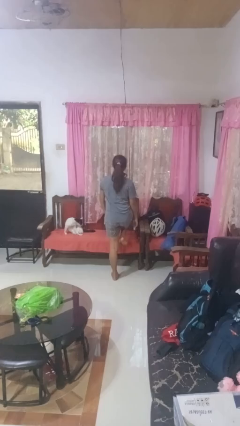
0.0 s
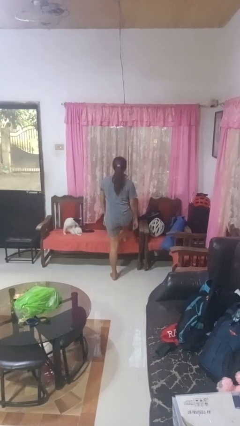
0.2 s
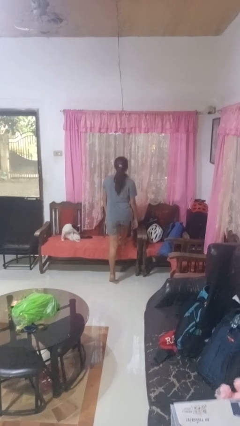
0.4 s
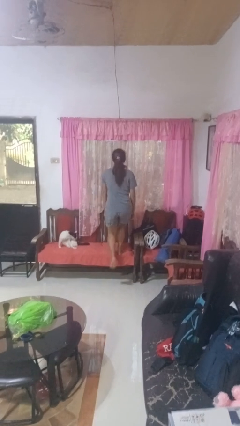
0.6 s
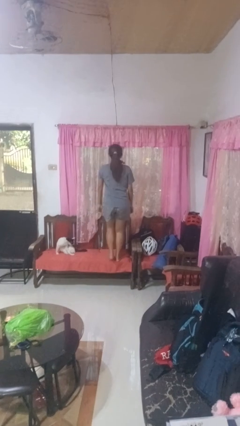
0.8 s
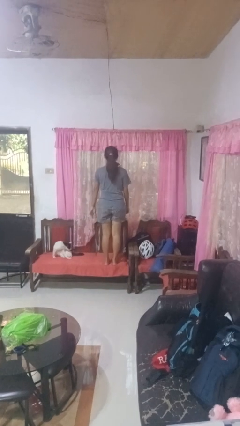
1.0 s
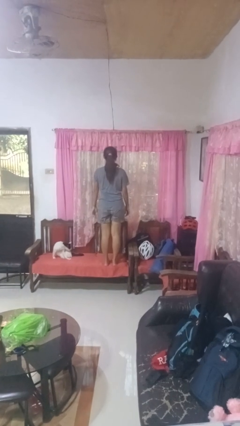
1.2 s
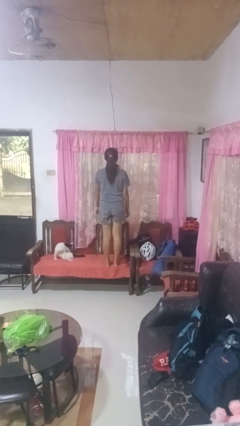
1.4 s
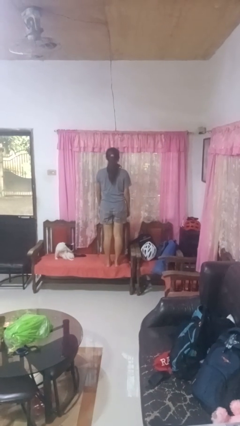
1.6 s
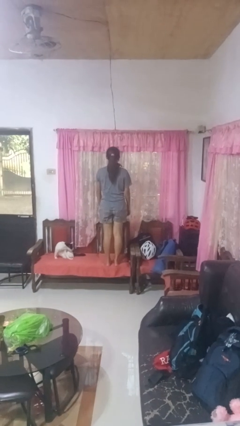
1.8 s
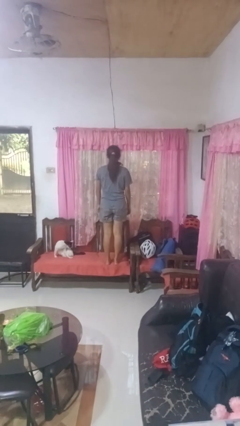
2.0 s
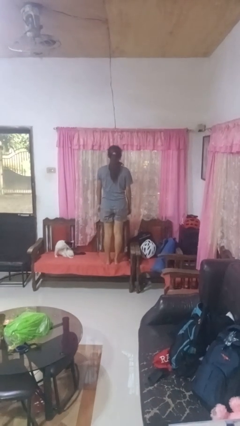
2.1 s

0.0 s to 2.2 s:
person climbs on chair

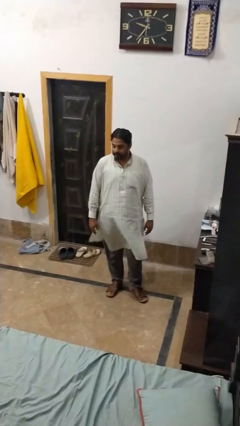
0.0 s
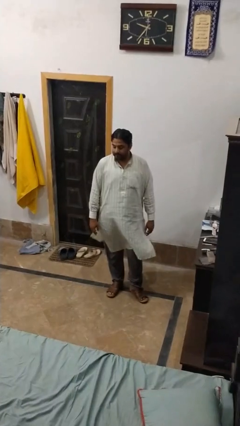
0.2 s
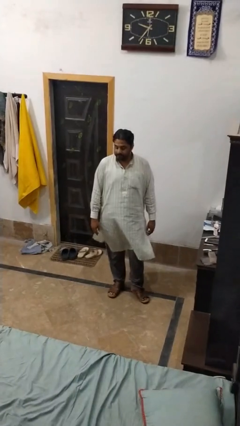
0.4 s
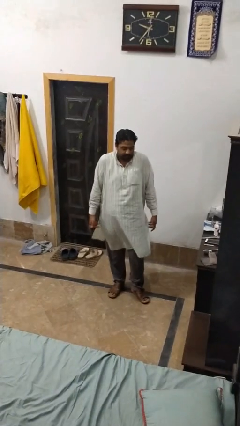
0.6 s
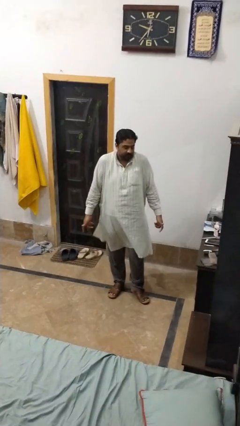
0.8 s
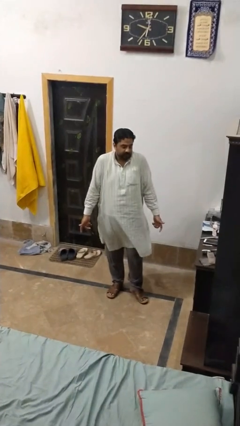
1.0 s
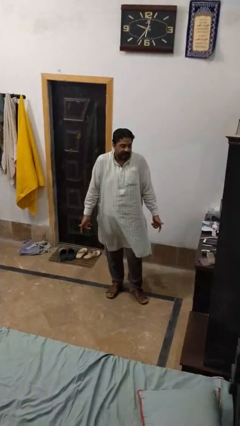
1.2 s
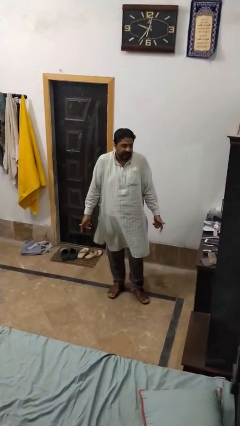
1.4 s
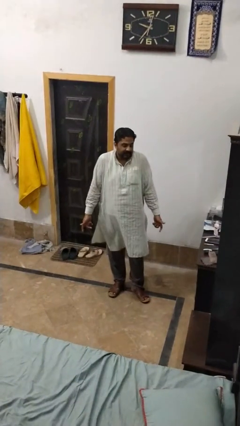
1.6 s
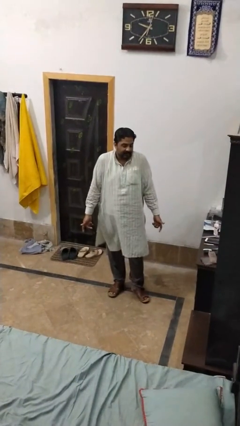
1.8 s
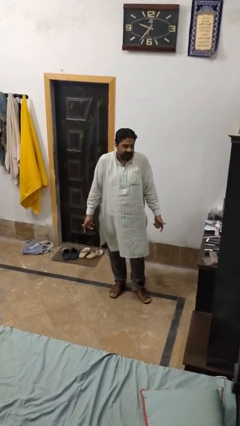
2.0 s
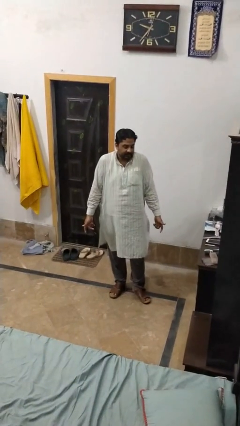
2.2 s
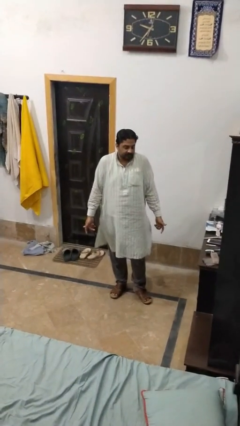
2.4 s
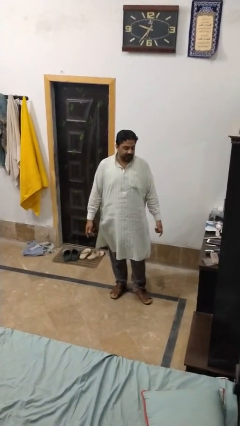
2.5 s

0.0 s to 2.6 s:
person shrugs

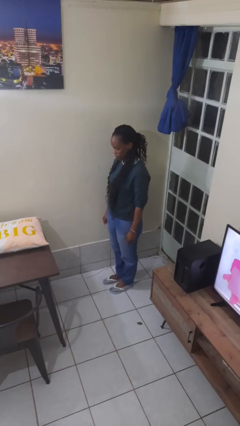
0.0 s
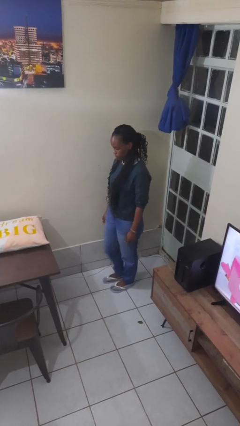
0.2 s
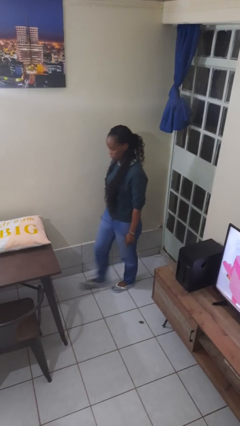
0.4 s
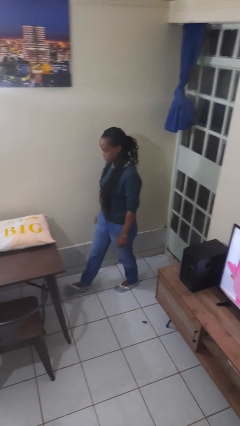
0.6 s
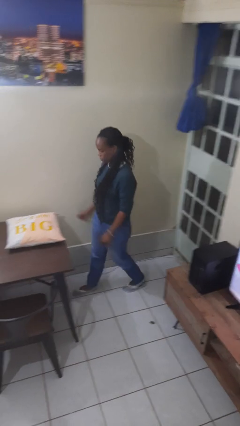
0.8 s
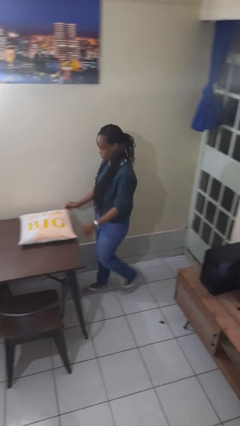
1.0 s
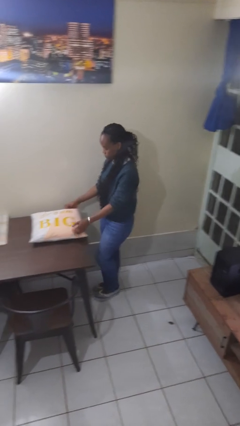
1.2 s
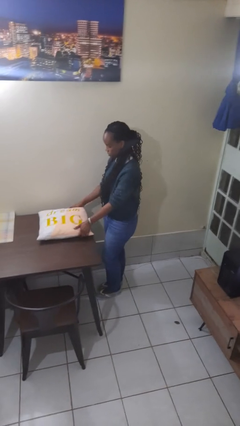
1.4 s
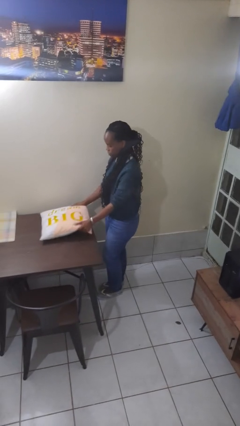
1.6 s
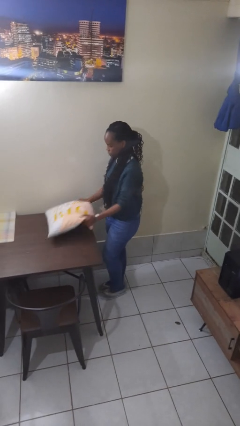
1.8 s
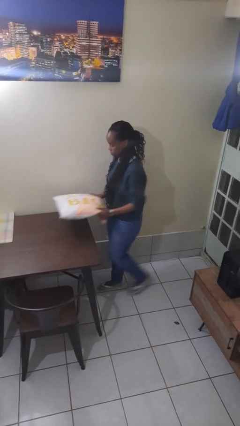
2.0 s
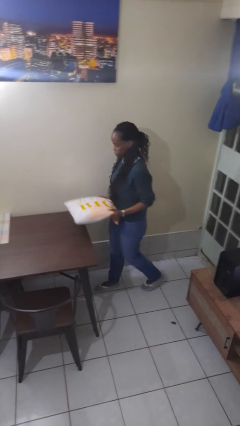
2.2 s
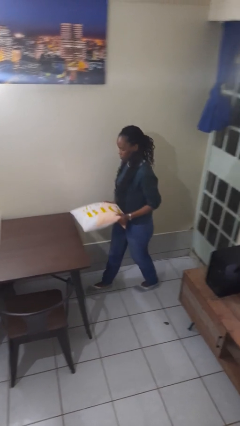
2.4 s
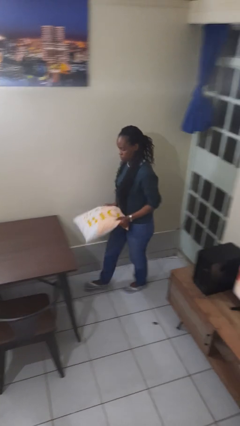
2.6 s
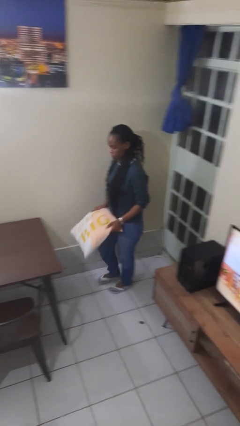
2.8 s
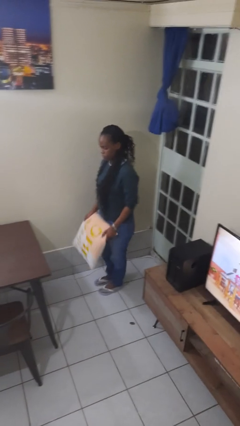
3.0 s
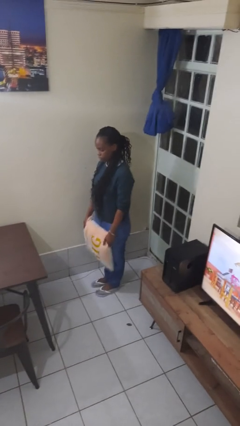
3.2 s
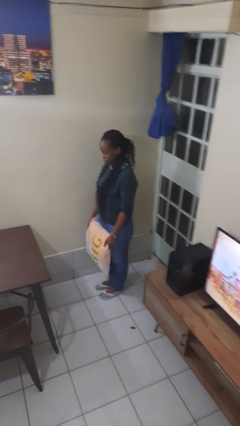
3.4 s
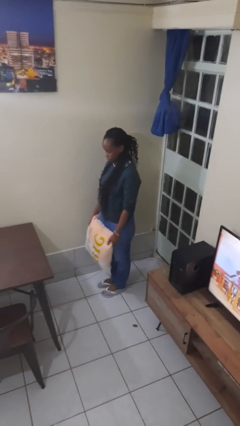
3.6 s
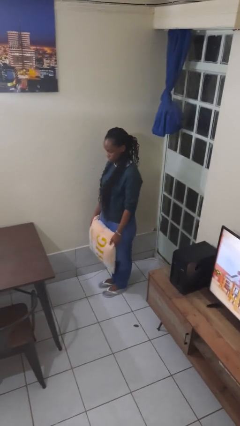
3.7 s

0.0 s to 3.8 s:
person picks up object from table

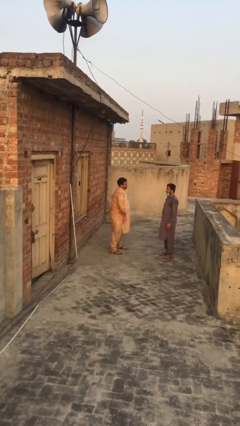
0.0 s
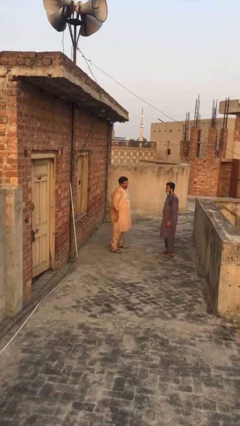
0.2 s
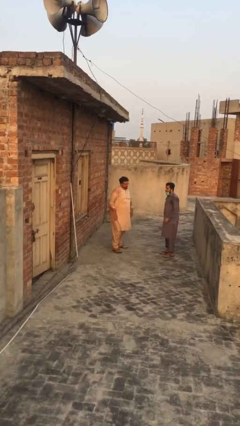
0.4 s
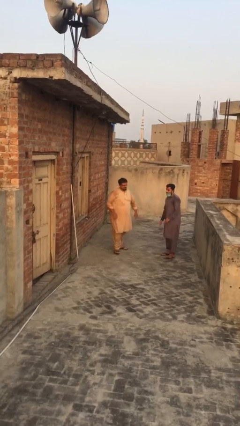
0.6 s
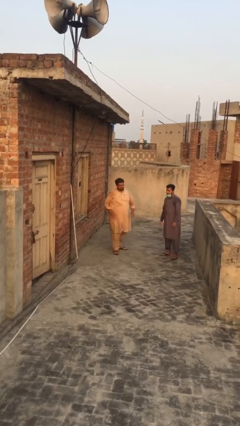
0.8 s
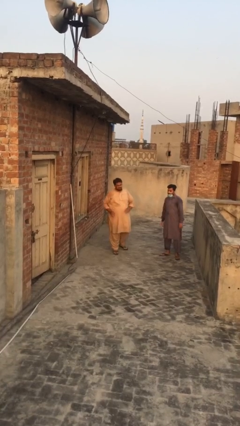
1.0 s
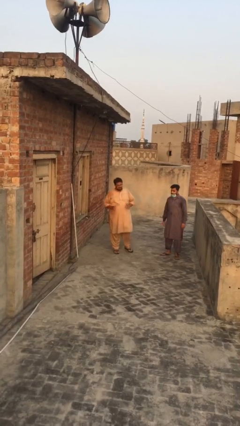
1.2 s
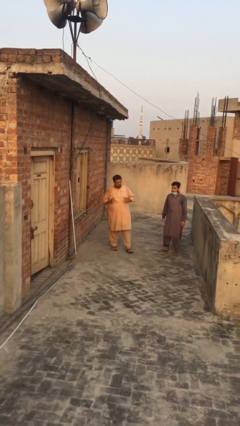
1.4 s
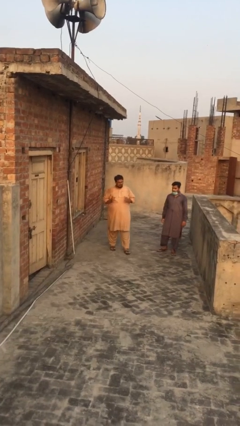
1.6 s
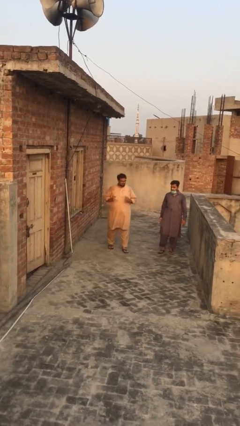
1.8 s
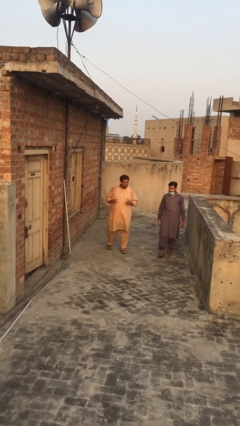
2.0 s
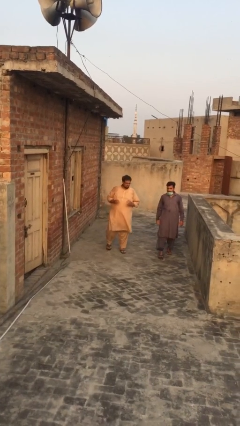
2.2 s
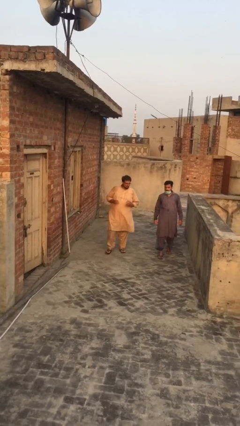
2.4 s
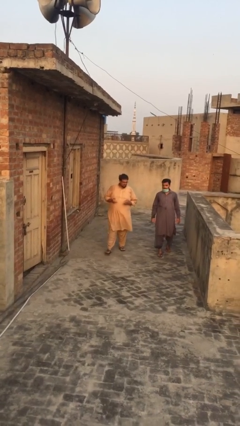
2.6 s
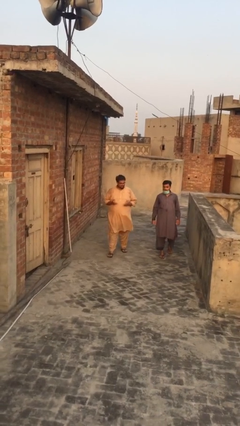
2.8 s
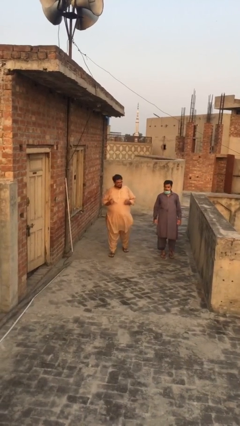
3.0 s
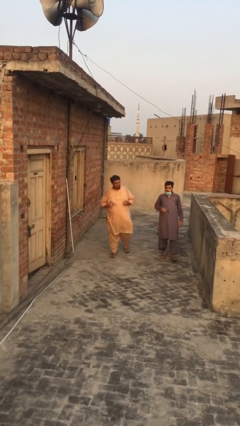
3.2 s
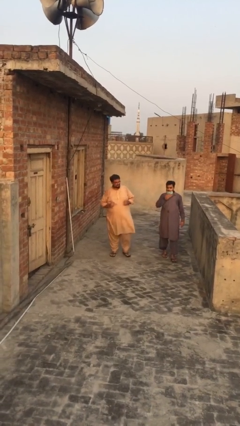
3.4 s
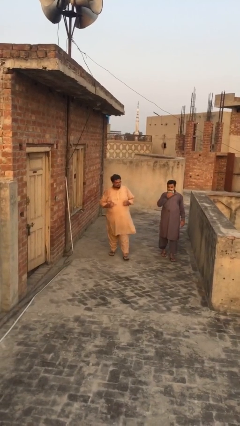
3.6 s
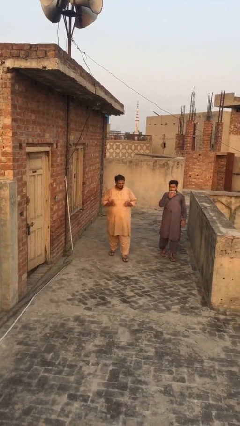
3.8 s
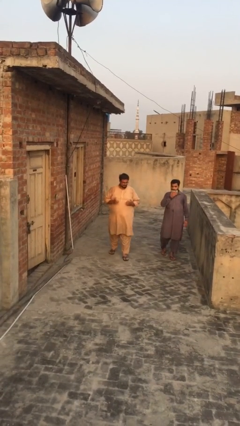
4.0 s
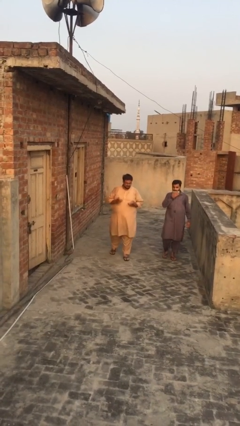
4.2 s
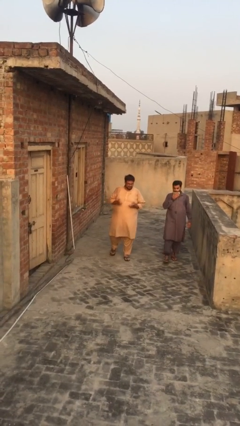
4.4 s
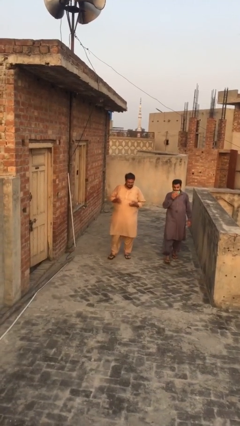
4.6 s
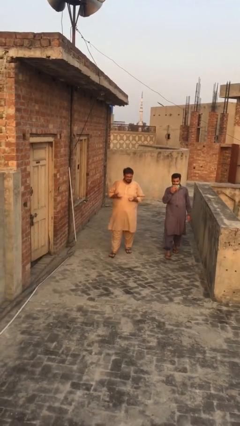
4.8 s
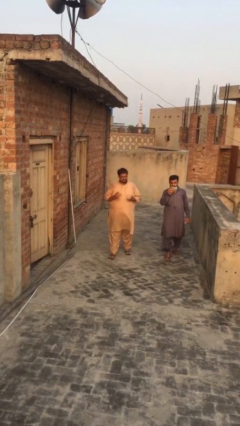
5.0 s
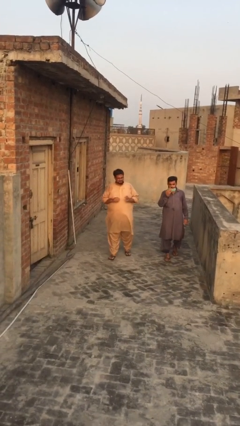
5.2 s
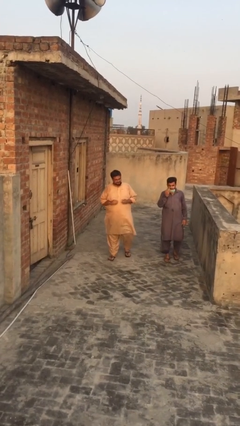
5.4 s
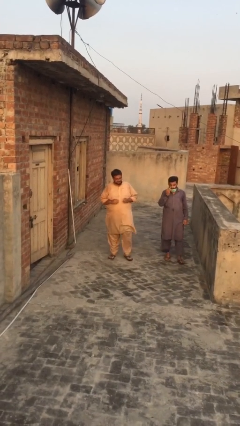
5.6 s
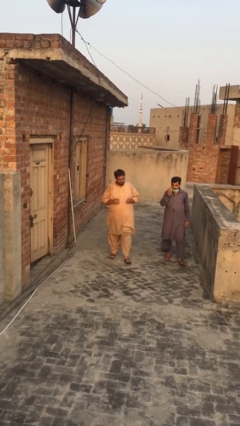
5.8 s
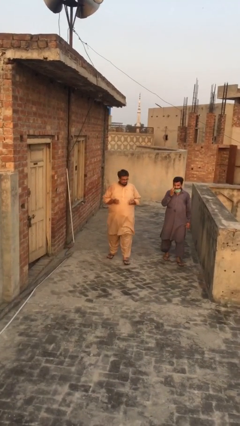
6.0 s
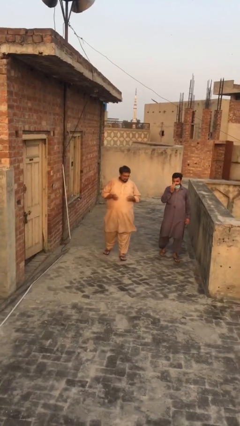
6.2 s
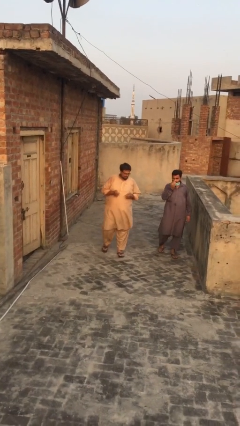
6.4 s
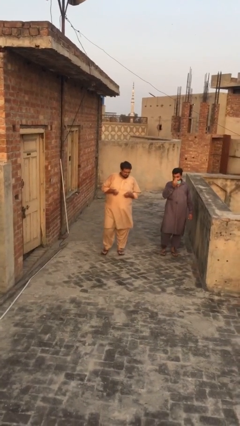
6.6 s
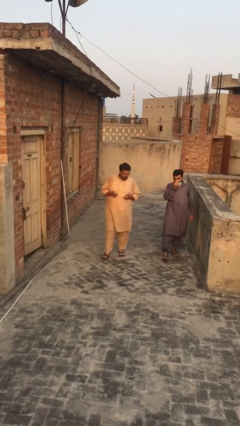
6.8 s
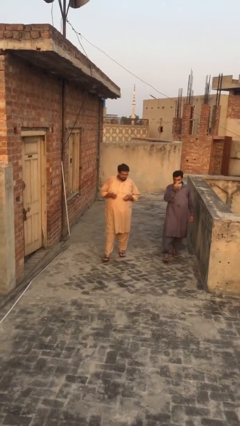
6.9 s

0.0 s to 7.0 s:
person talks to person

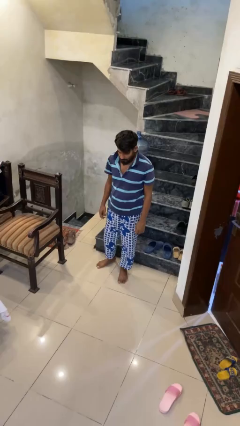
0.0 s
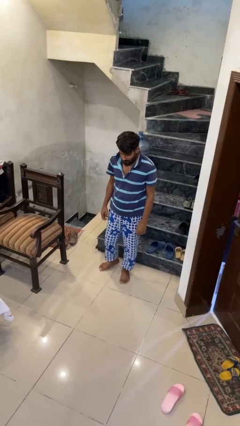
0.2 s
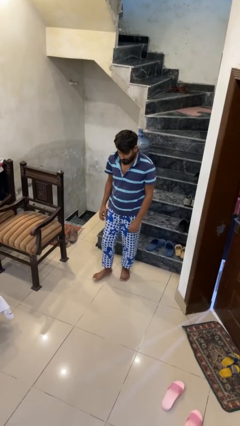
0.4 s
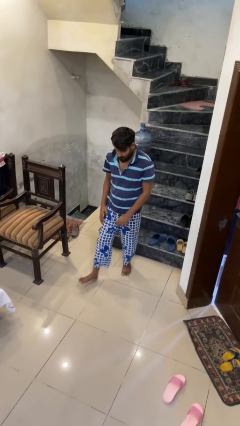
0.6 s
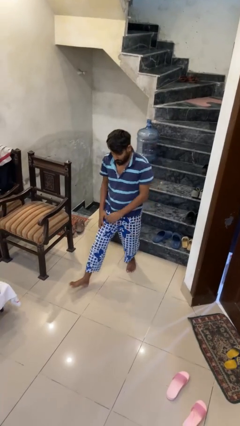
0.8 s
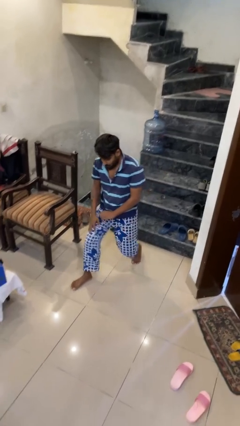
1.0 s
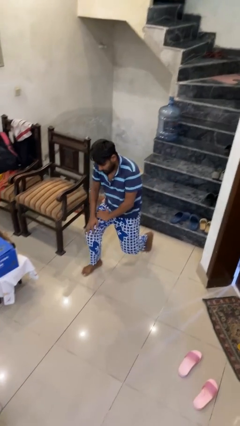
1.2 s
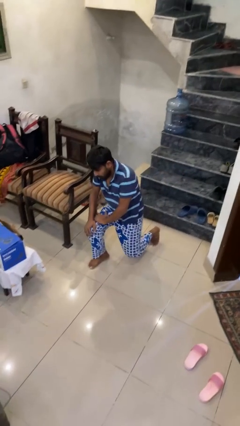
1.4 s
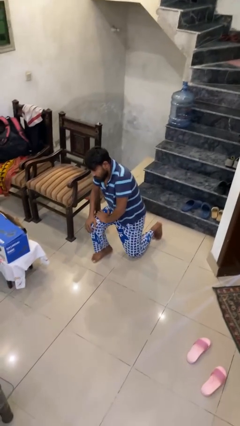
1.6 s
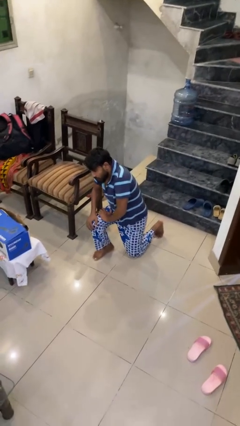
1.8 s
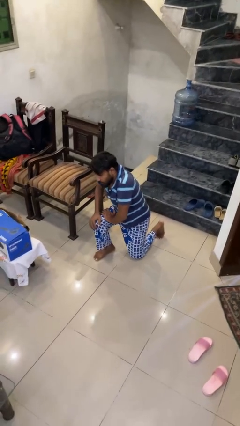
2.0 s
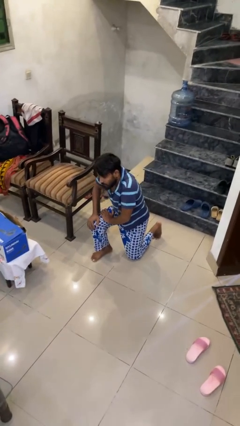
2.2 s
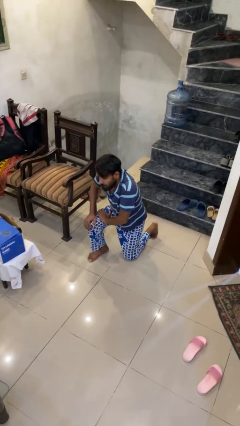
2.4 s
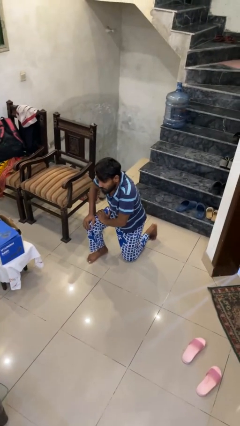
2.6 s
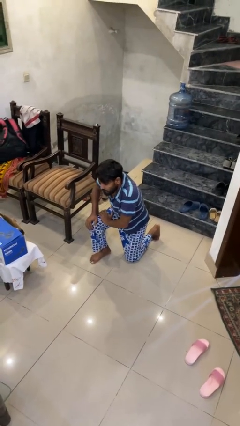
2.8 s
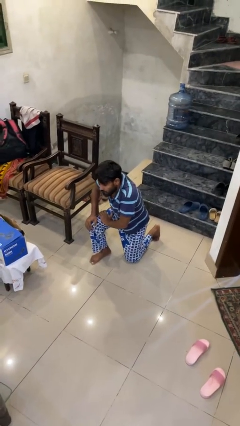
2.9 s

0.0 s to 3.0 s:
person kneels
